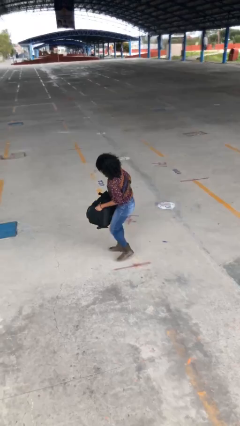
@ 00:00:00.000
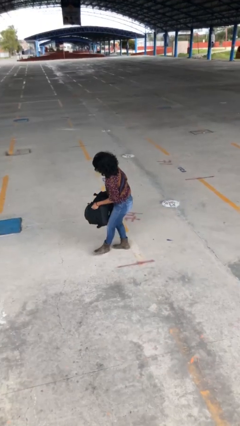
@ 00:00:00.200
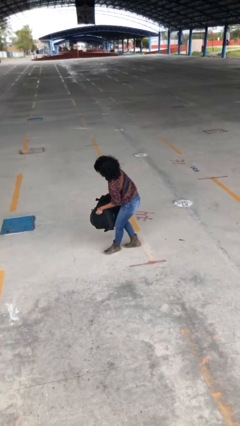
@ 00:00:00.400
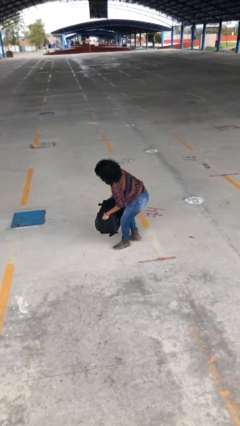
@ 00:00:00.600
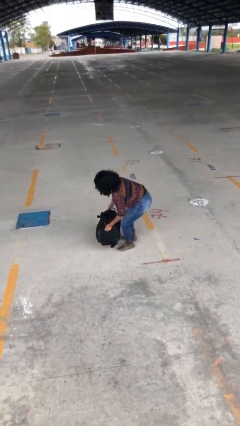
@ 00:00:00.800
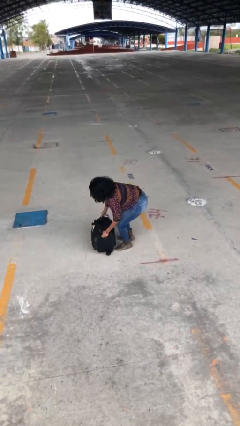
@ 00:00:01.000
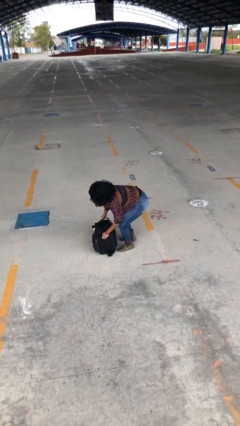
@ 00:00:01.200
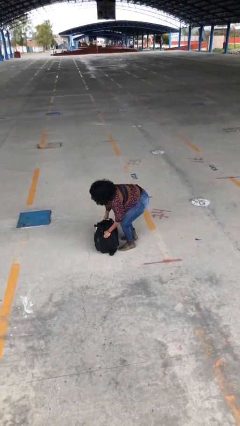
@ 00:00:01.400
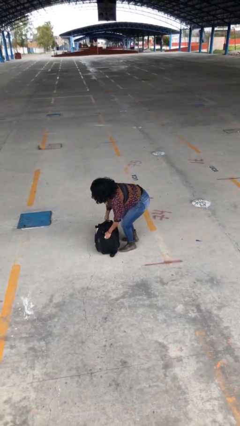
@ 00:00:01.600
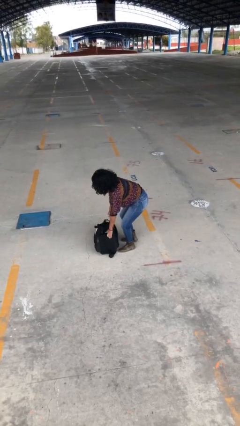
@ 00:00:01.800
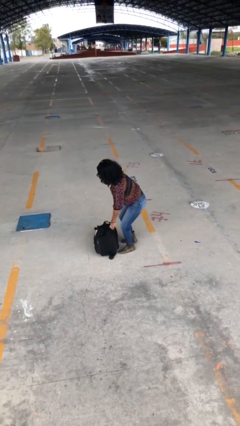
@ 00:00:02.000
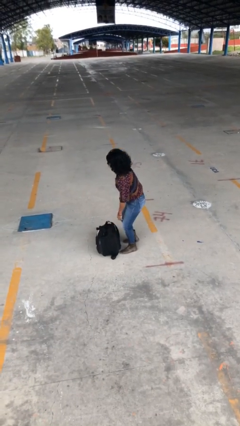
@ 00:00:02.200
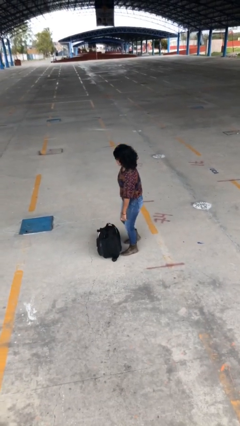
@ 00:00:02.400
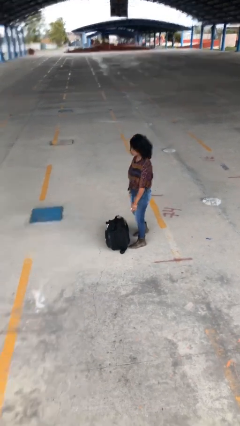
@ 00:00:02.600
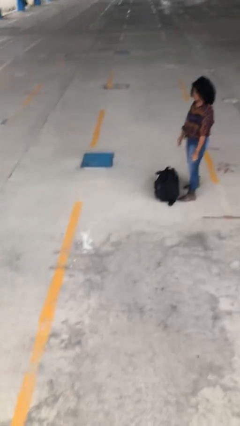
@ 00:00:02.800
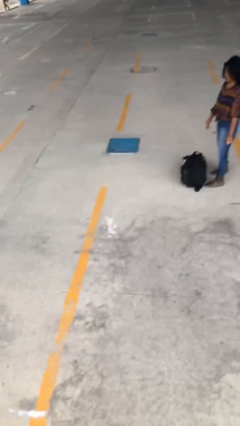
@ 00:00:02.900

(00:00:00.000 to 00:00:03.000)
person puts down object on floor

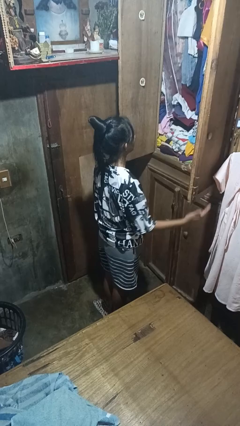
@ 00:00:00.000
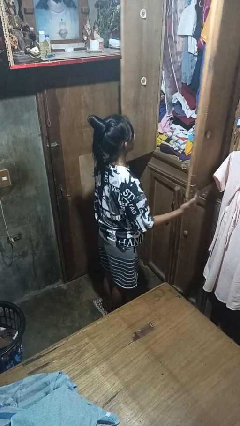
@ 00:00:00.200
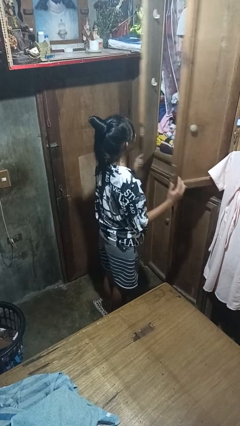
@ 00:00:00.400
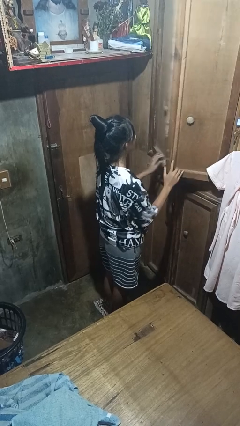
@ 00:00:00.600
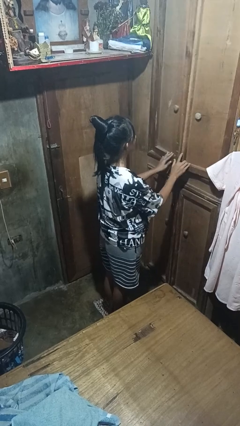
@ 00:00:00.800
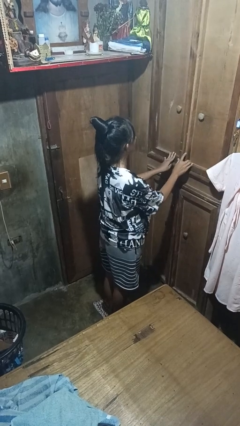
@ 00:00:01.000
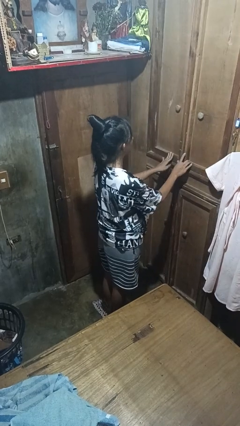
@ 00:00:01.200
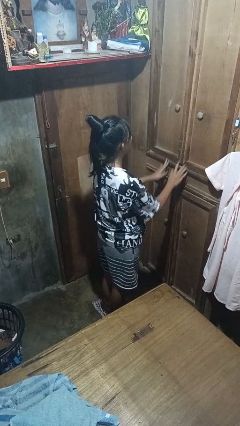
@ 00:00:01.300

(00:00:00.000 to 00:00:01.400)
person closes closet door

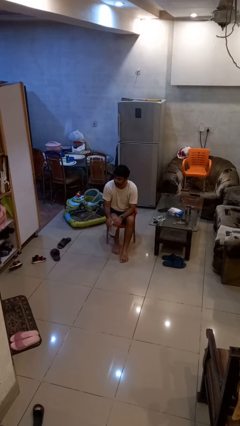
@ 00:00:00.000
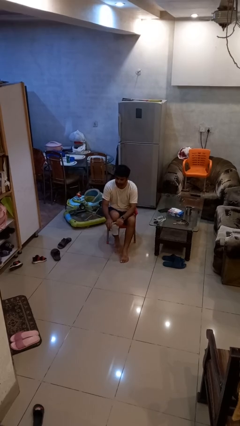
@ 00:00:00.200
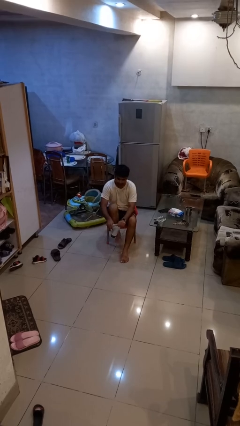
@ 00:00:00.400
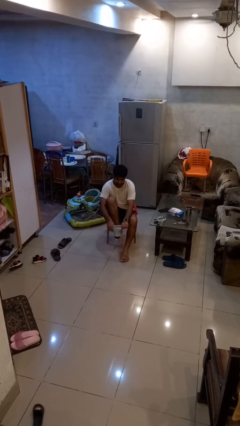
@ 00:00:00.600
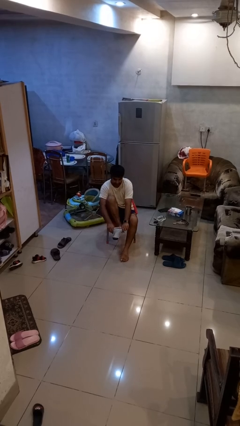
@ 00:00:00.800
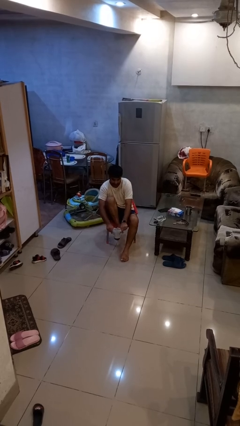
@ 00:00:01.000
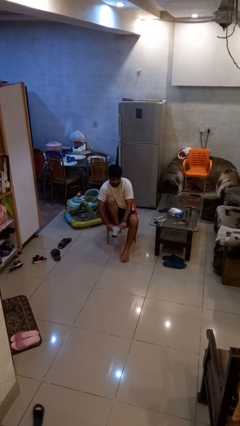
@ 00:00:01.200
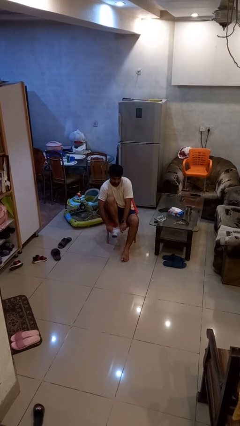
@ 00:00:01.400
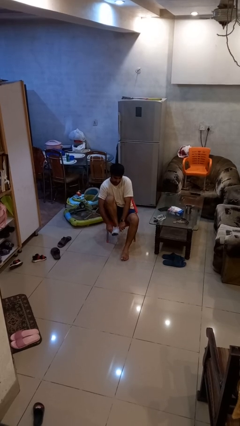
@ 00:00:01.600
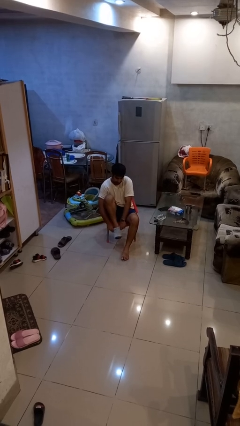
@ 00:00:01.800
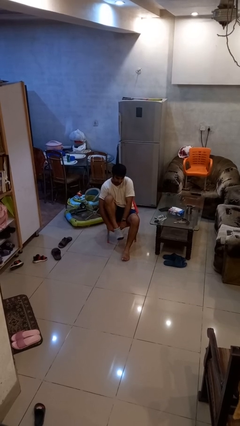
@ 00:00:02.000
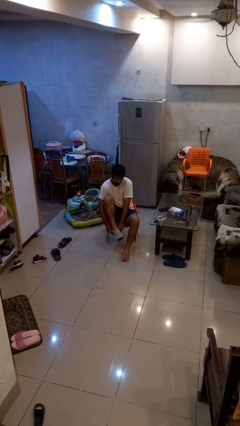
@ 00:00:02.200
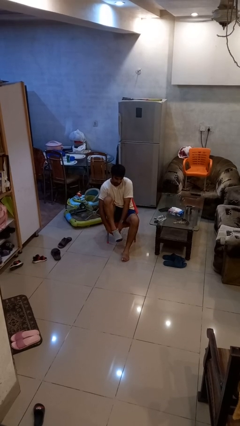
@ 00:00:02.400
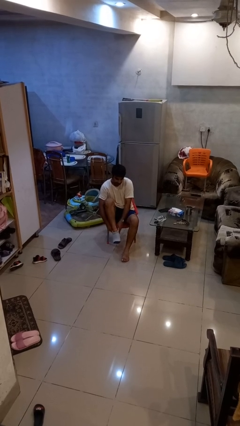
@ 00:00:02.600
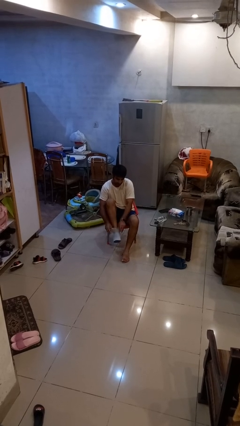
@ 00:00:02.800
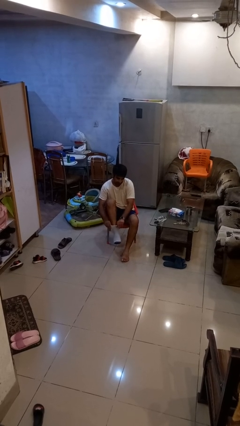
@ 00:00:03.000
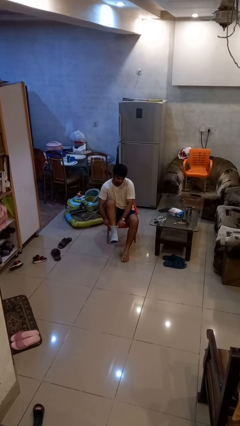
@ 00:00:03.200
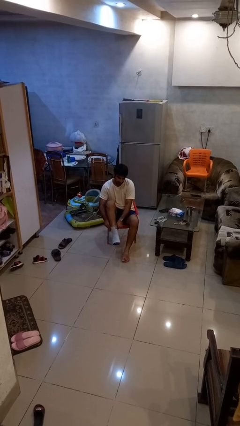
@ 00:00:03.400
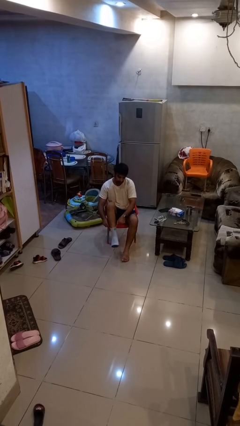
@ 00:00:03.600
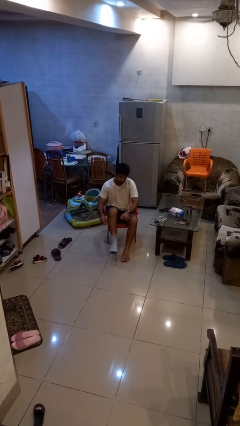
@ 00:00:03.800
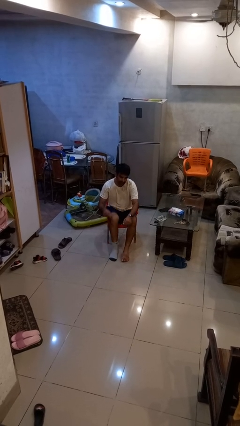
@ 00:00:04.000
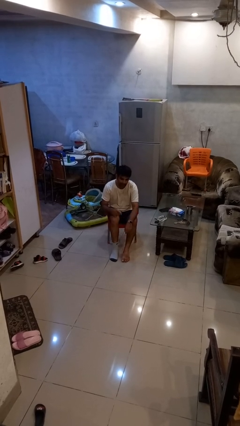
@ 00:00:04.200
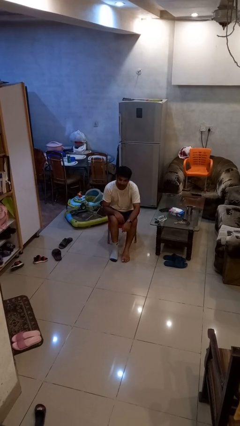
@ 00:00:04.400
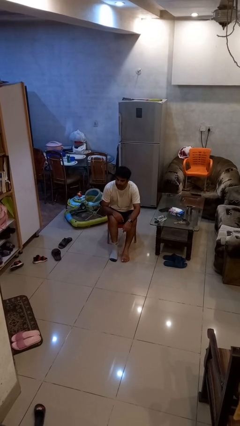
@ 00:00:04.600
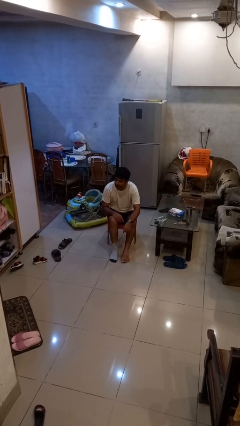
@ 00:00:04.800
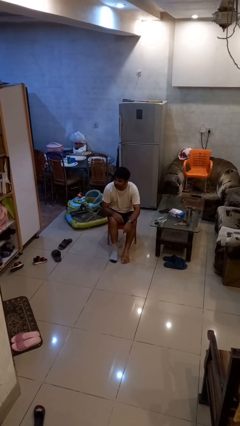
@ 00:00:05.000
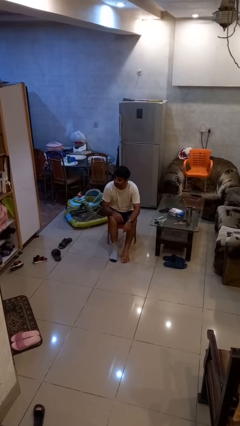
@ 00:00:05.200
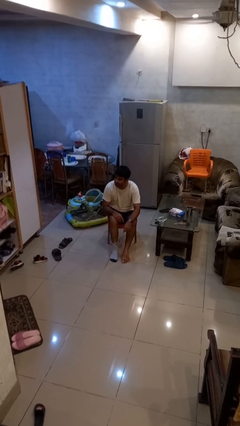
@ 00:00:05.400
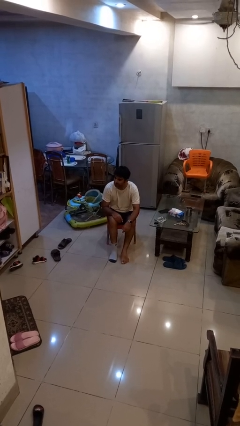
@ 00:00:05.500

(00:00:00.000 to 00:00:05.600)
person puts on socks

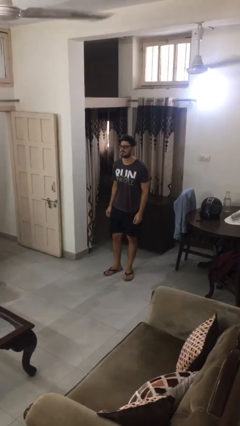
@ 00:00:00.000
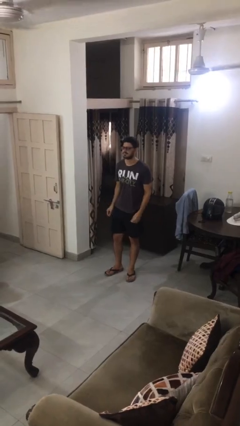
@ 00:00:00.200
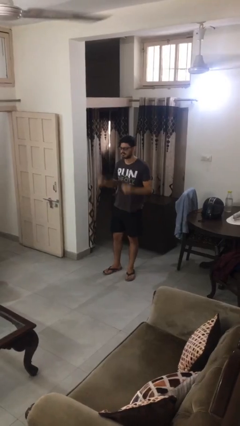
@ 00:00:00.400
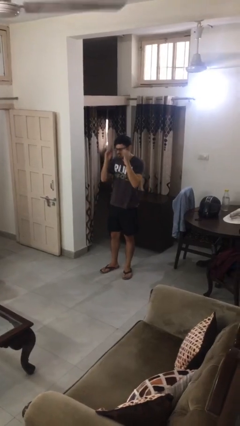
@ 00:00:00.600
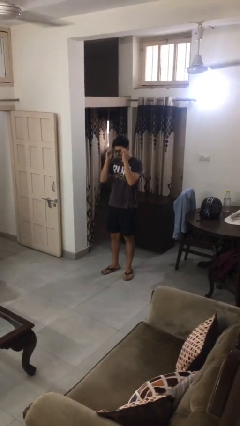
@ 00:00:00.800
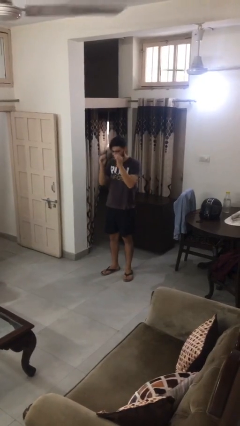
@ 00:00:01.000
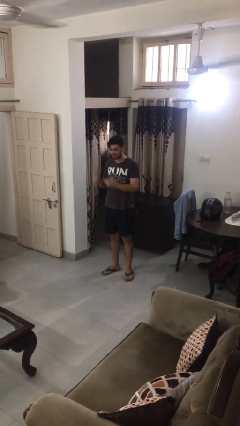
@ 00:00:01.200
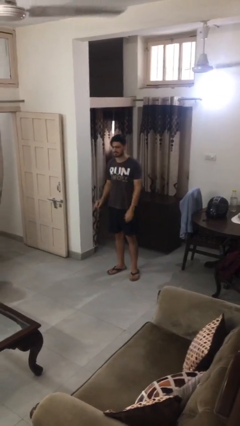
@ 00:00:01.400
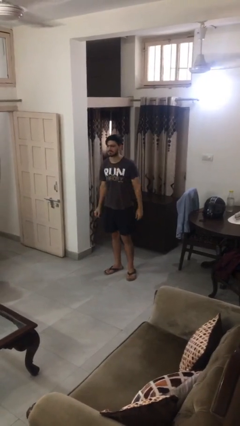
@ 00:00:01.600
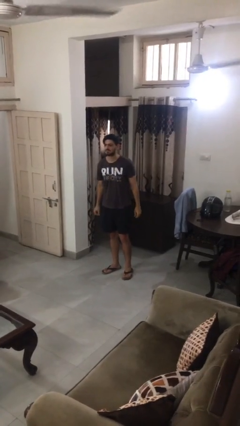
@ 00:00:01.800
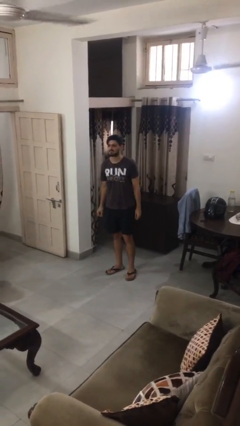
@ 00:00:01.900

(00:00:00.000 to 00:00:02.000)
person takes off glasses

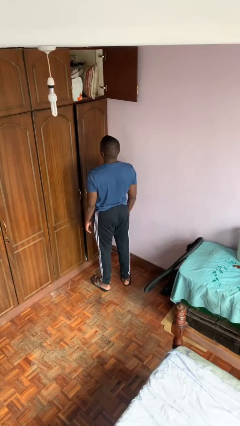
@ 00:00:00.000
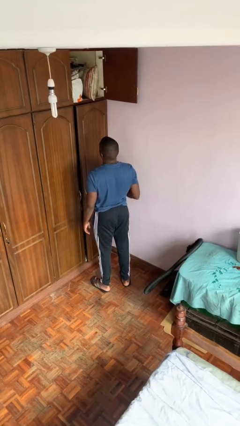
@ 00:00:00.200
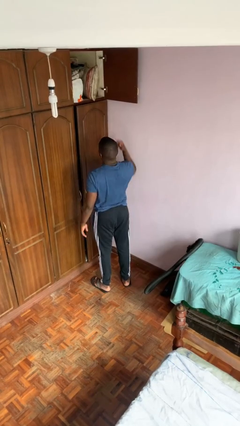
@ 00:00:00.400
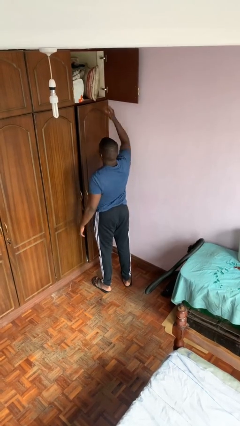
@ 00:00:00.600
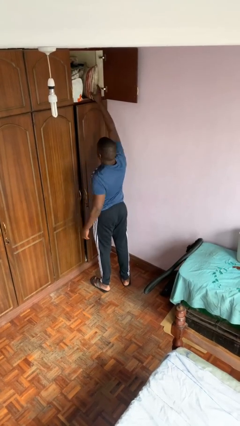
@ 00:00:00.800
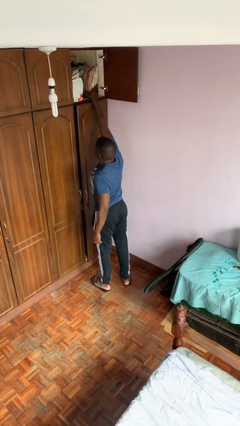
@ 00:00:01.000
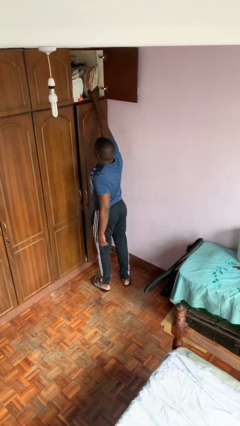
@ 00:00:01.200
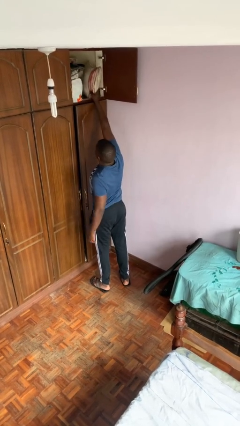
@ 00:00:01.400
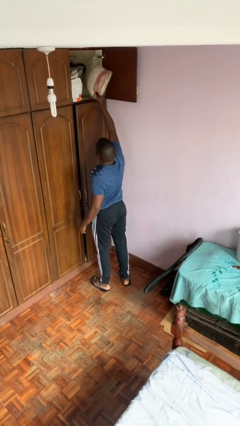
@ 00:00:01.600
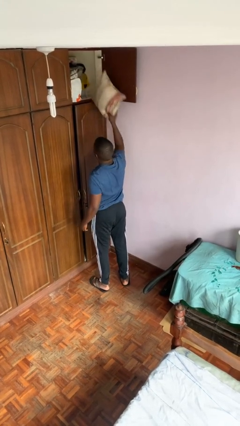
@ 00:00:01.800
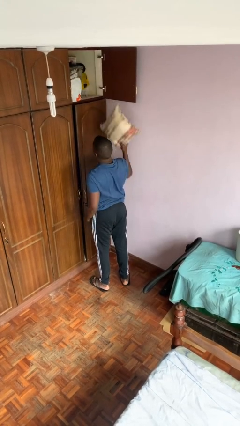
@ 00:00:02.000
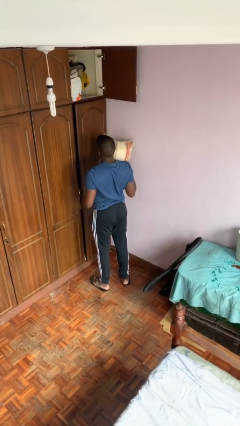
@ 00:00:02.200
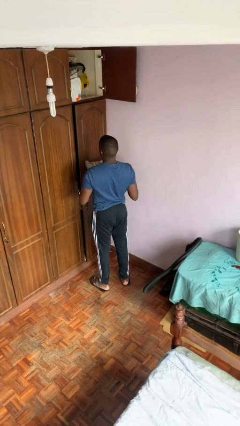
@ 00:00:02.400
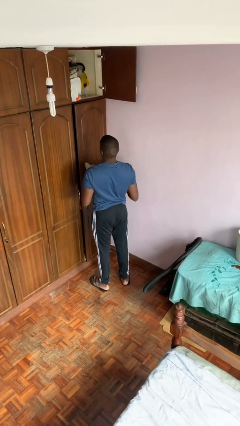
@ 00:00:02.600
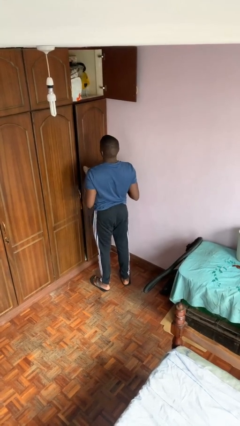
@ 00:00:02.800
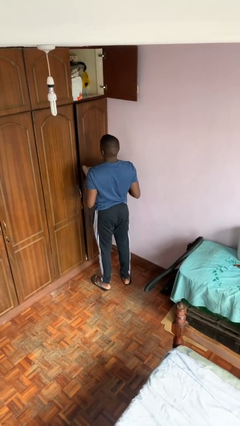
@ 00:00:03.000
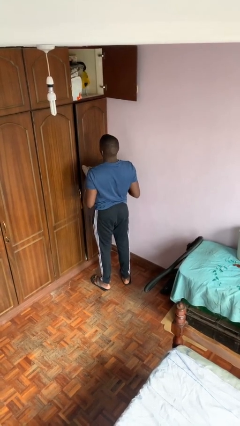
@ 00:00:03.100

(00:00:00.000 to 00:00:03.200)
person picks up object from shelf

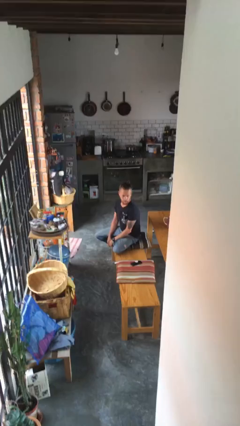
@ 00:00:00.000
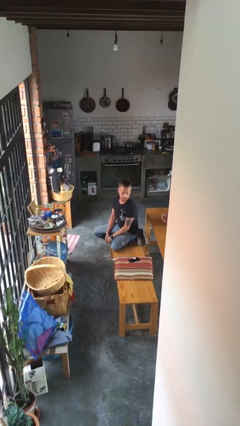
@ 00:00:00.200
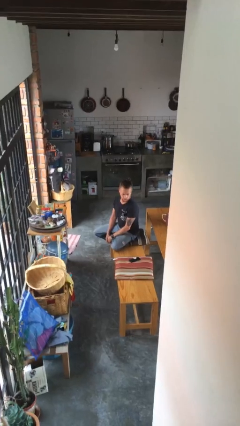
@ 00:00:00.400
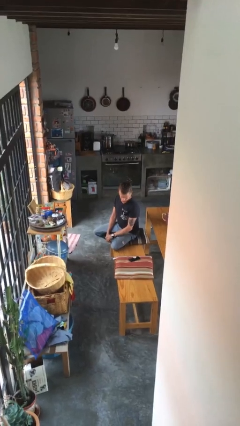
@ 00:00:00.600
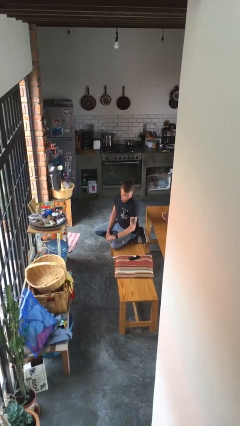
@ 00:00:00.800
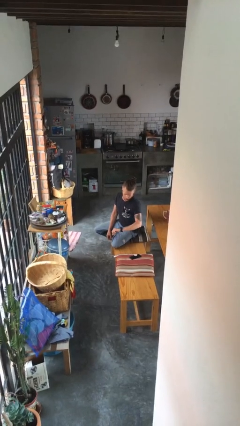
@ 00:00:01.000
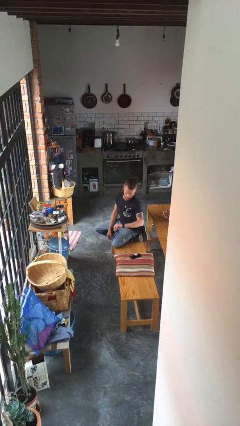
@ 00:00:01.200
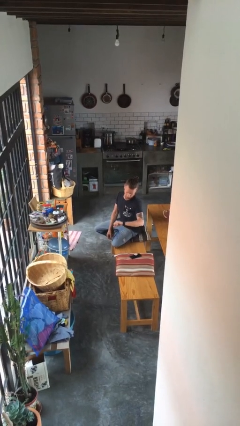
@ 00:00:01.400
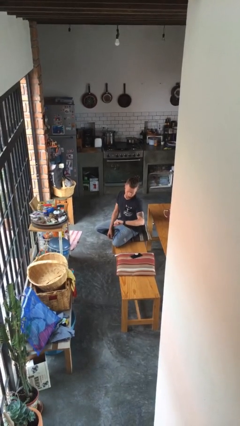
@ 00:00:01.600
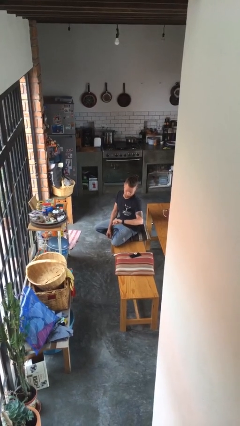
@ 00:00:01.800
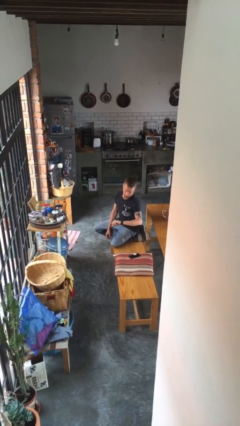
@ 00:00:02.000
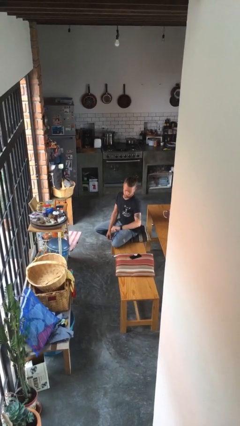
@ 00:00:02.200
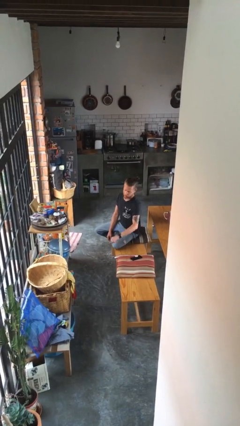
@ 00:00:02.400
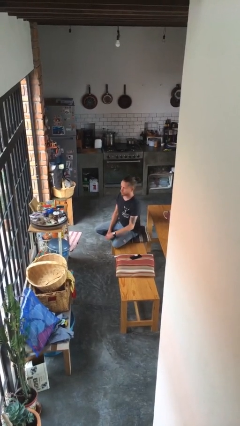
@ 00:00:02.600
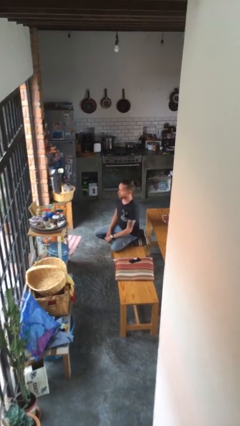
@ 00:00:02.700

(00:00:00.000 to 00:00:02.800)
person looks at wristwatch
